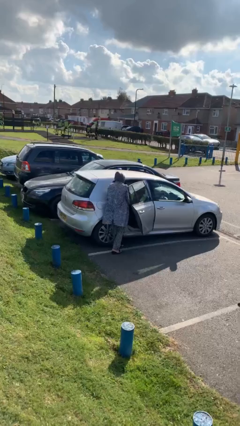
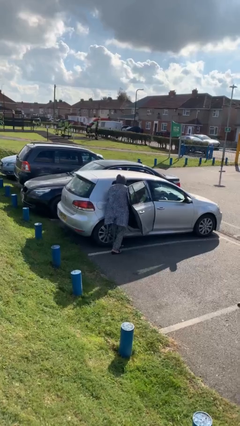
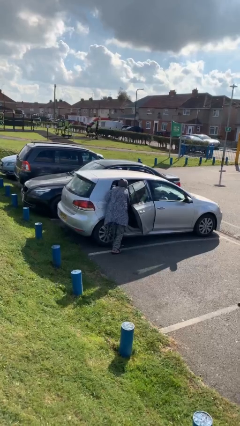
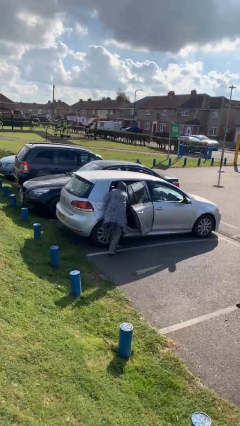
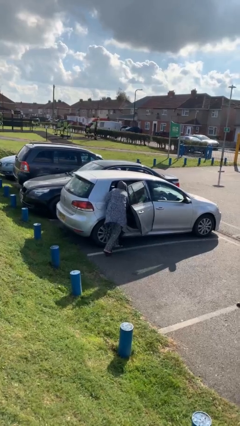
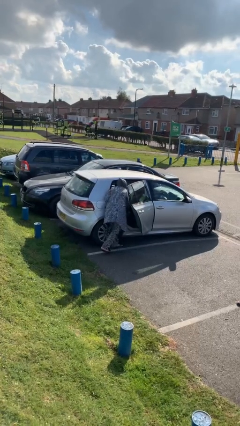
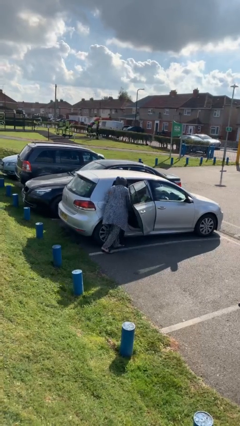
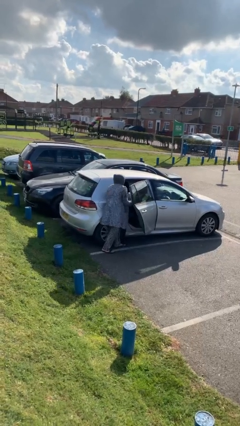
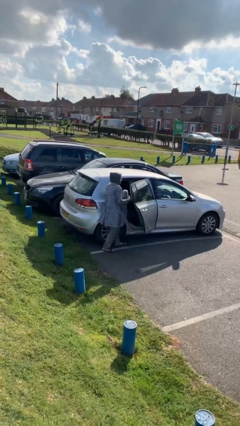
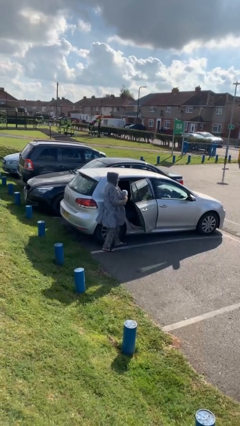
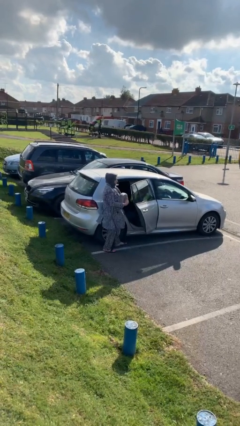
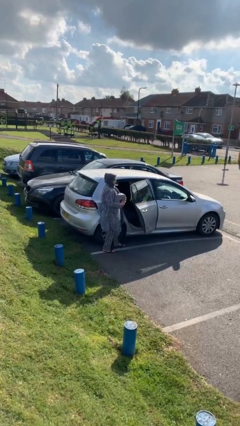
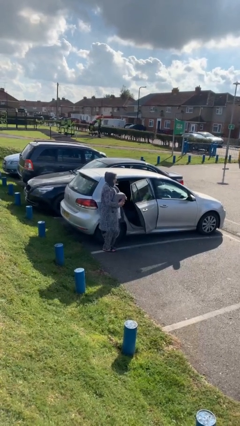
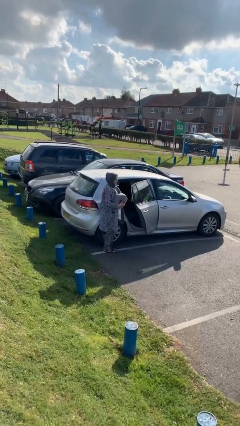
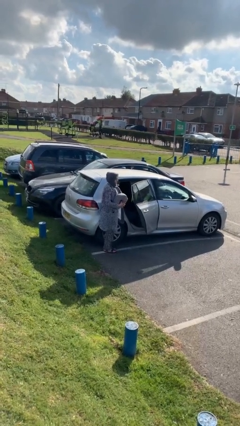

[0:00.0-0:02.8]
person unloads car

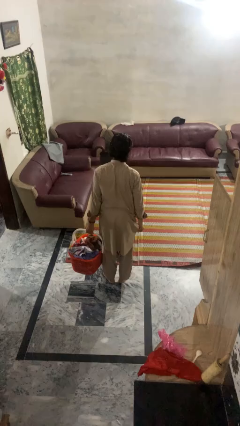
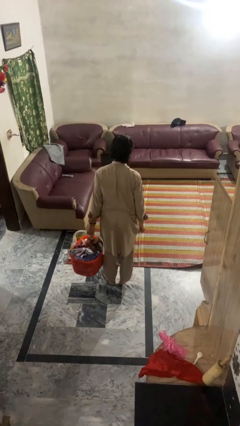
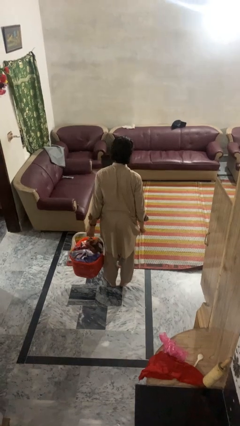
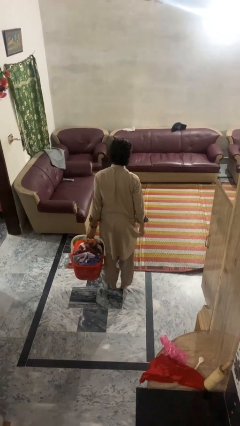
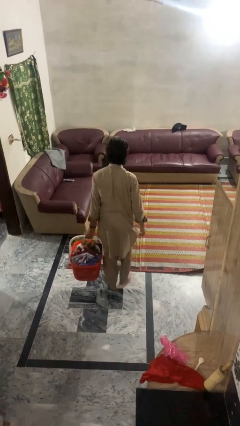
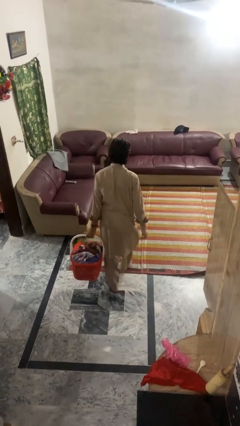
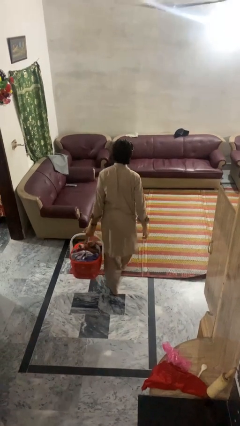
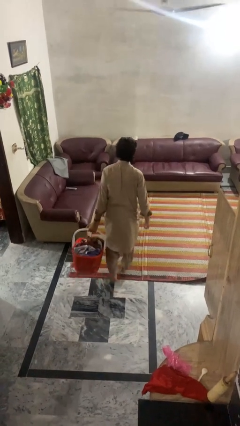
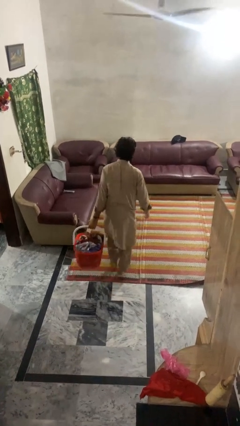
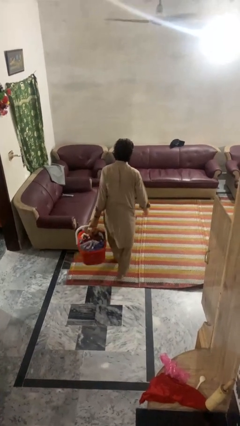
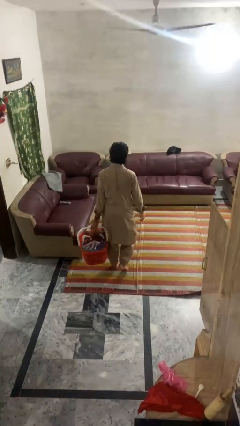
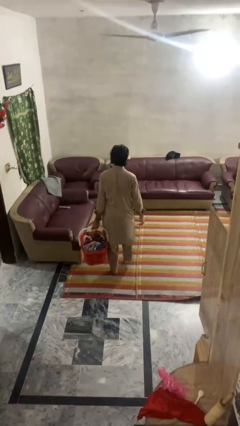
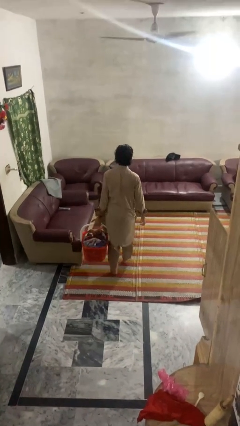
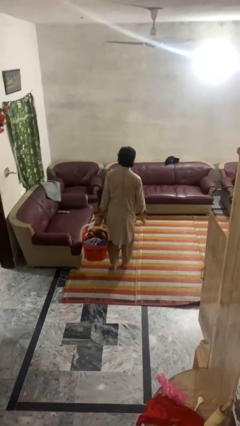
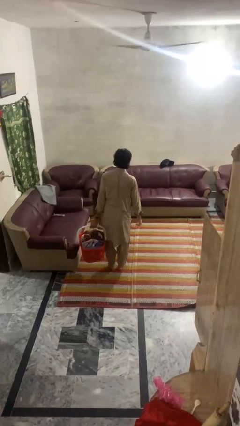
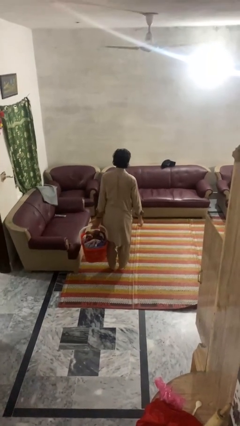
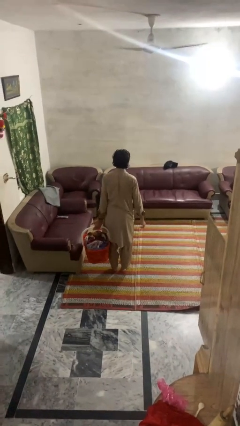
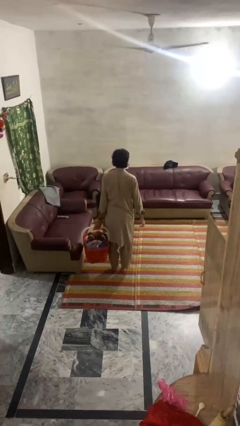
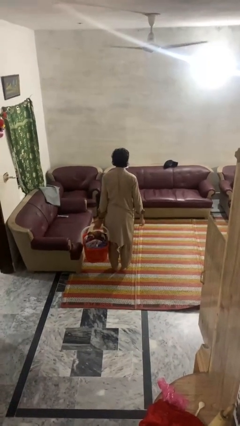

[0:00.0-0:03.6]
person carries laundry basket

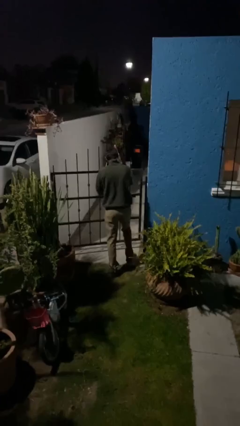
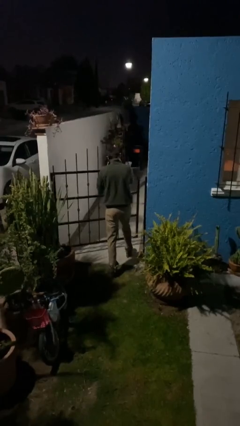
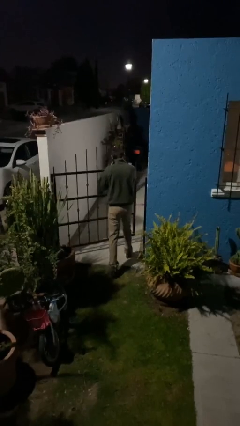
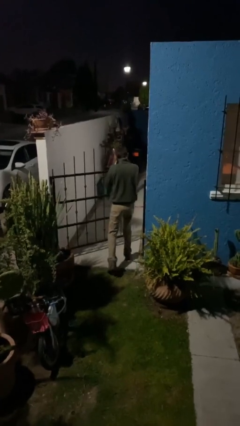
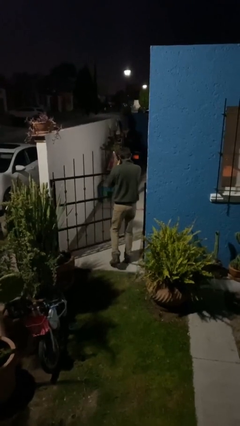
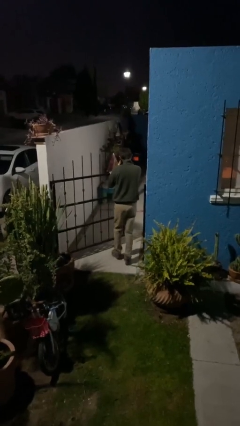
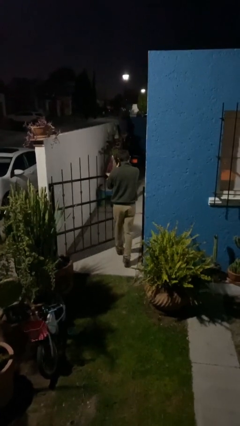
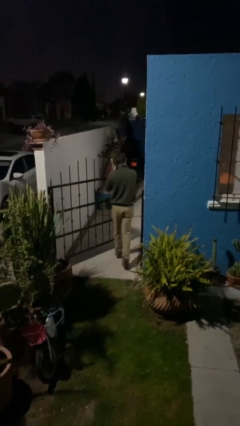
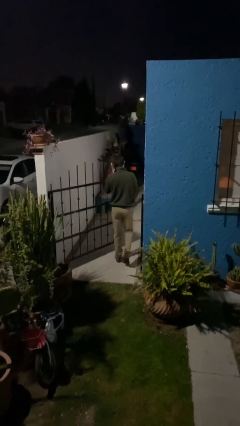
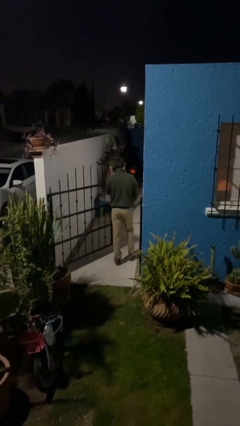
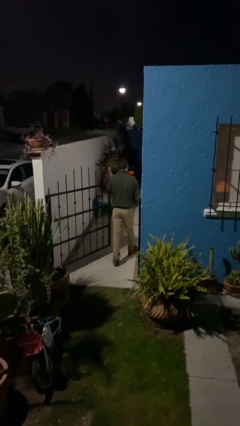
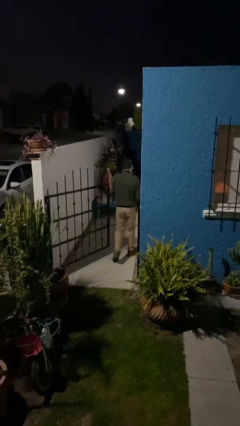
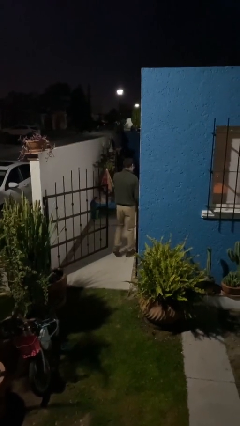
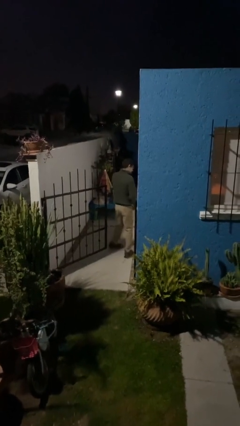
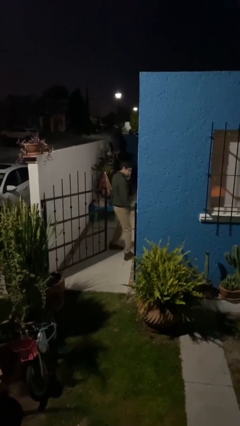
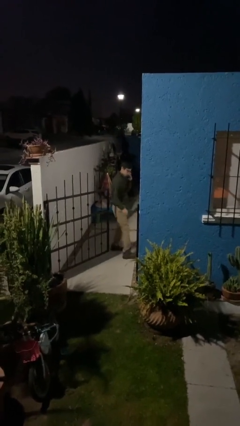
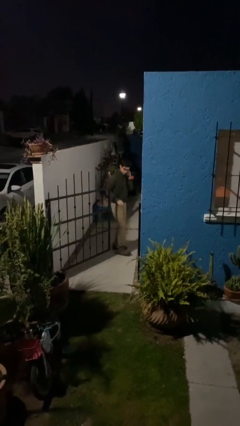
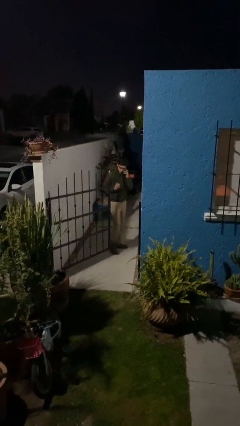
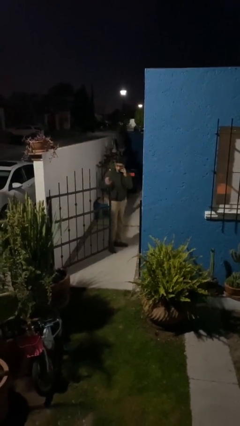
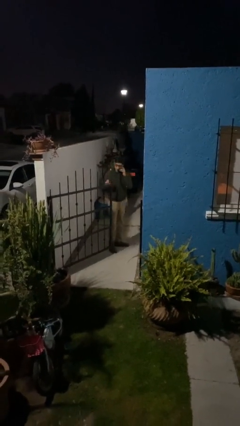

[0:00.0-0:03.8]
person exits scene through structure

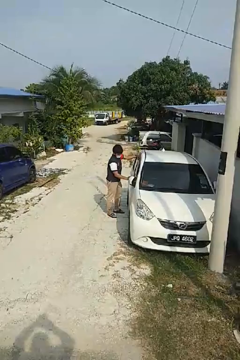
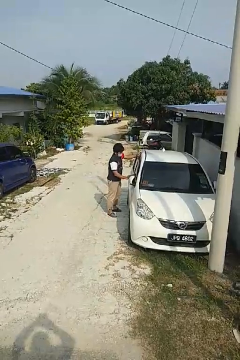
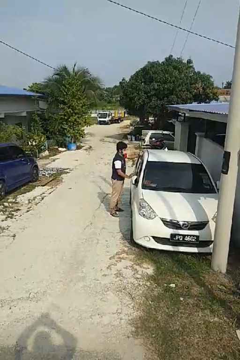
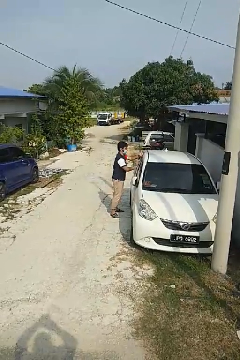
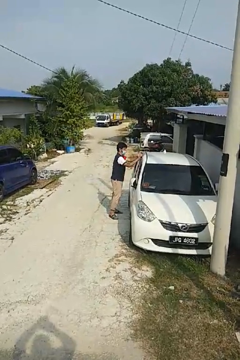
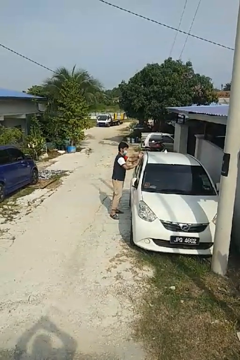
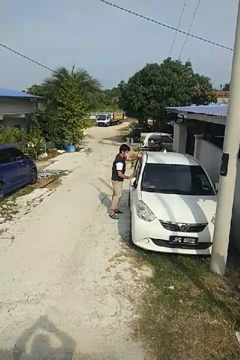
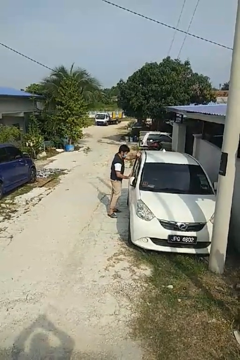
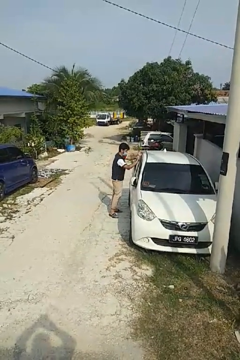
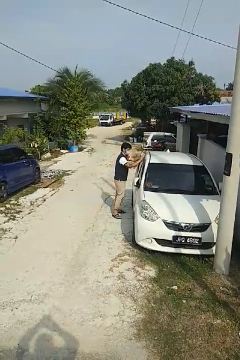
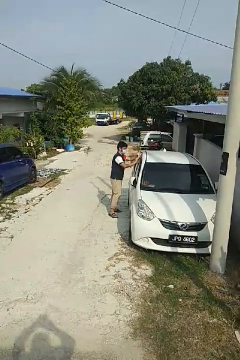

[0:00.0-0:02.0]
person polishes car with rag

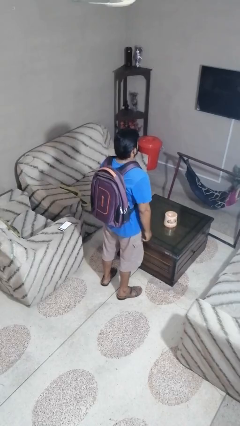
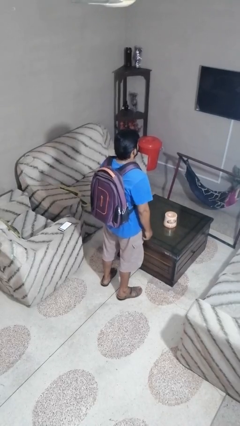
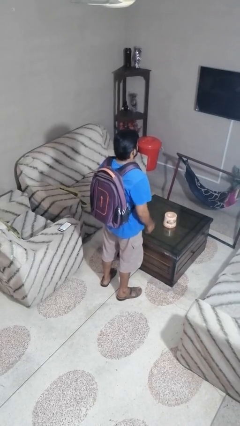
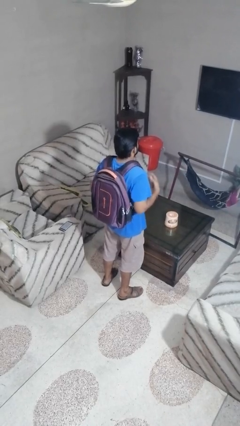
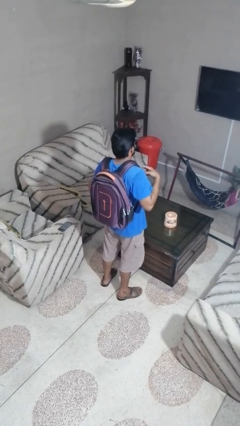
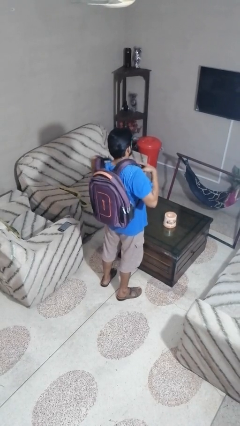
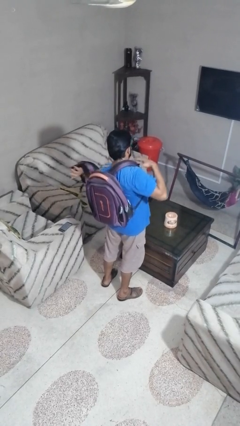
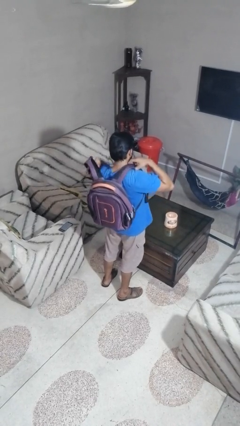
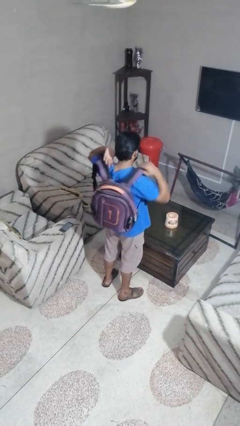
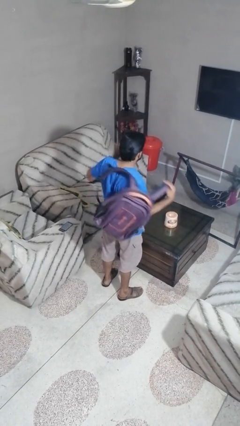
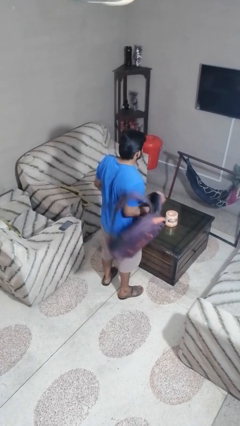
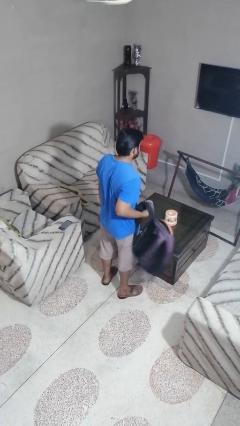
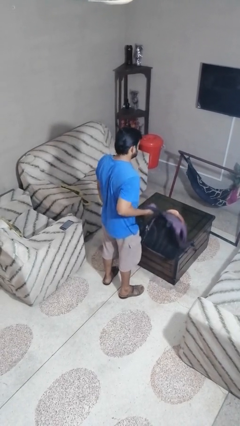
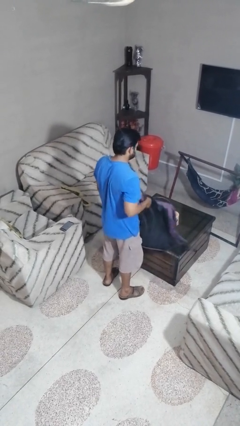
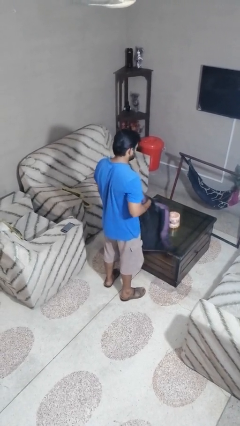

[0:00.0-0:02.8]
person takes off backpack

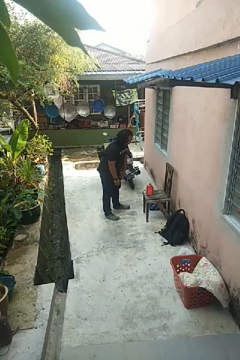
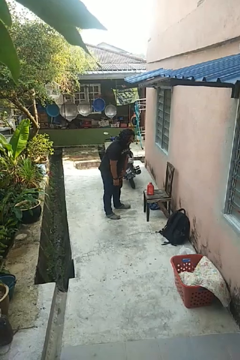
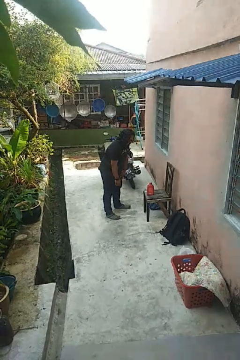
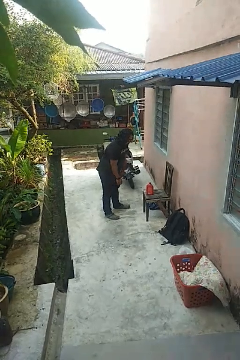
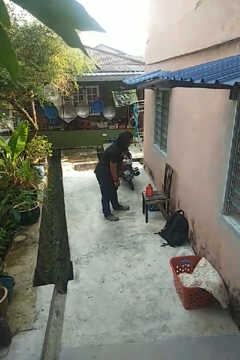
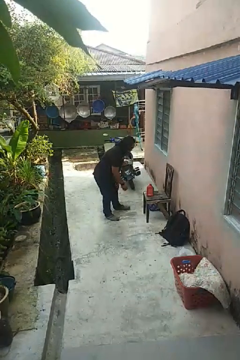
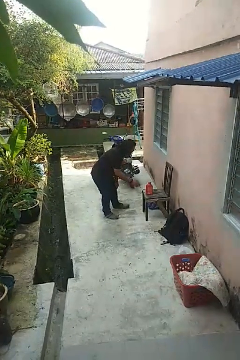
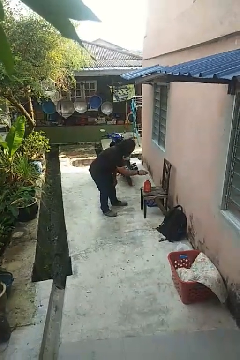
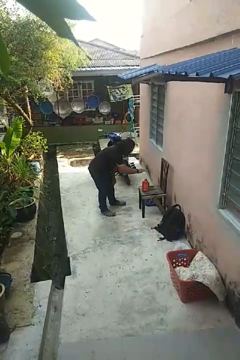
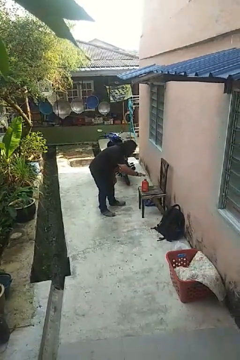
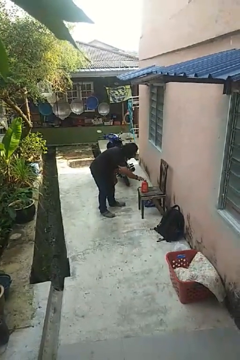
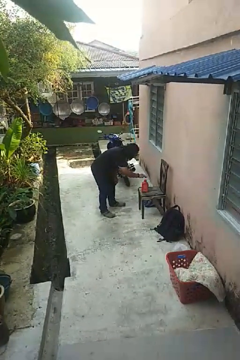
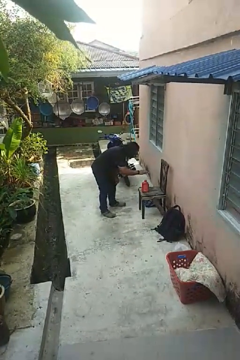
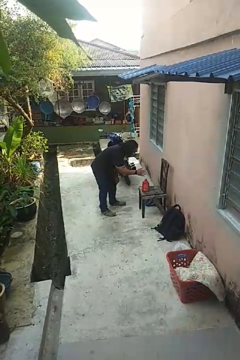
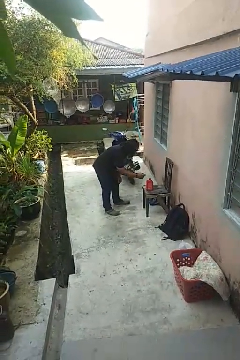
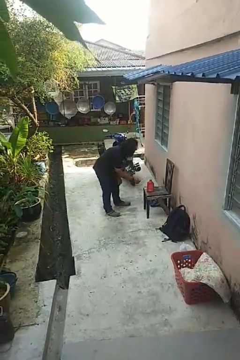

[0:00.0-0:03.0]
person waves hand over object

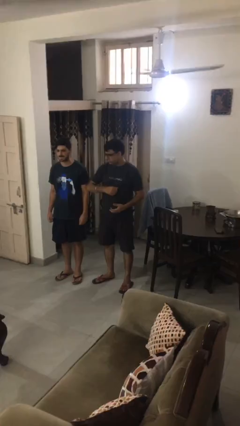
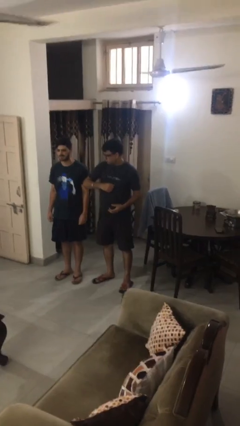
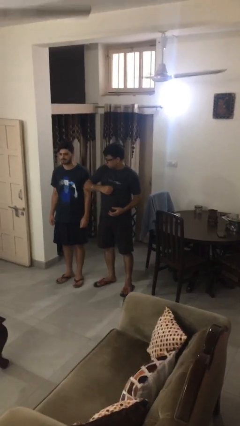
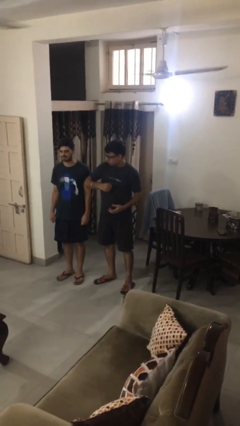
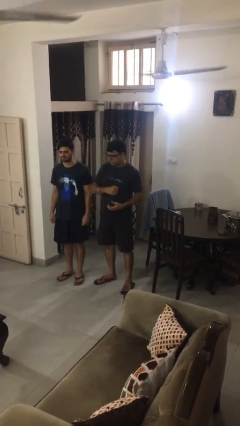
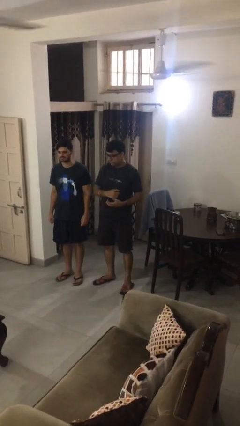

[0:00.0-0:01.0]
person nudges person with elbow
